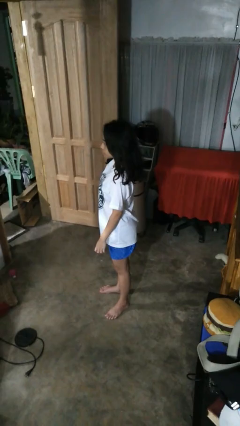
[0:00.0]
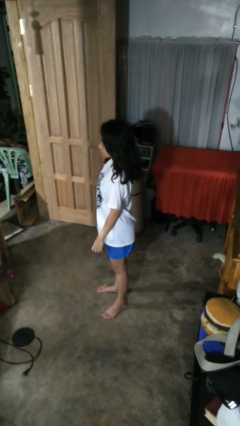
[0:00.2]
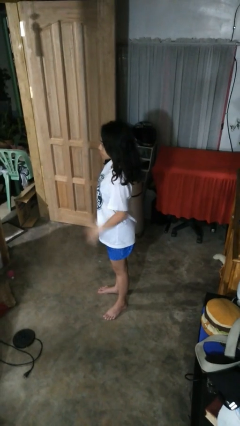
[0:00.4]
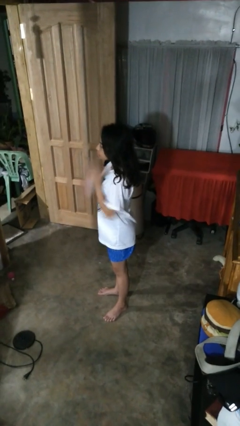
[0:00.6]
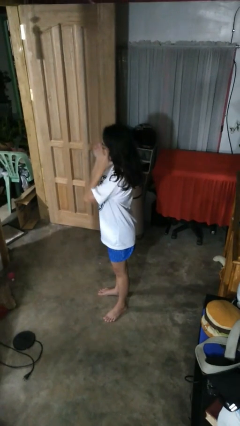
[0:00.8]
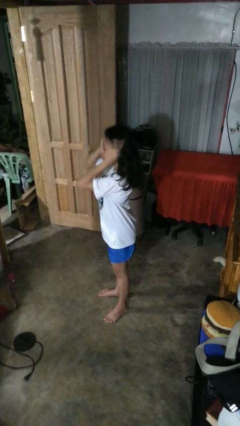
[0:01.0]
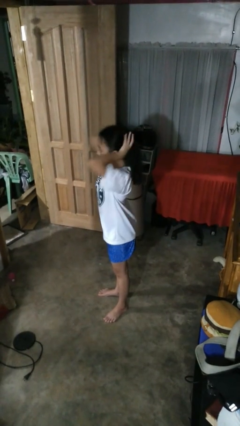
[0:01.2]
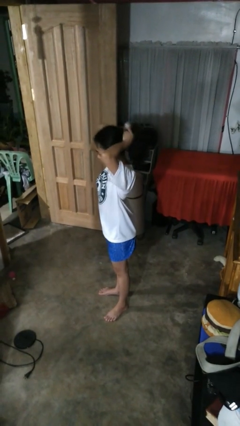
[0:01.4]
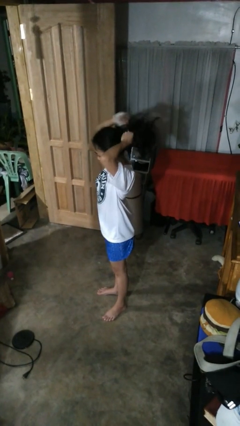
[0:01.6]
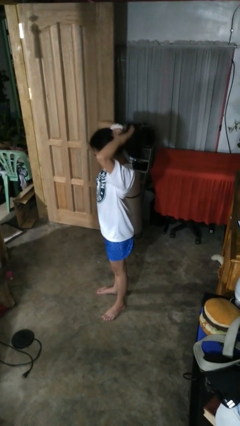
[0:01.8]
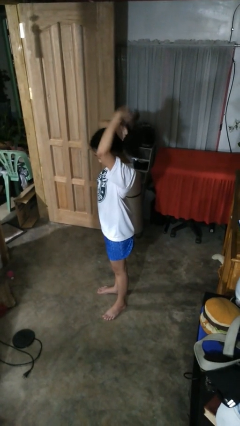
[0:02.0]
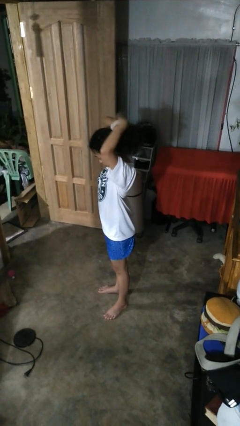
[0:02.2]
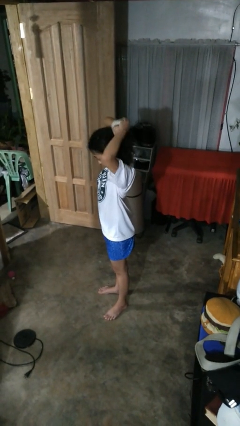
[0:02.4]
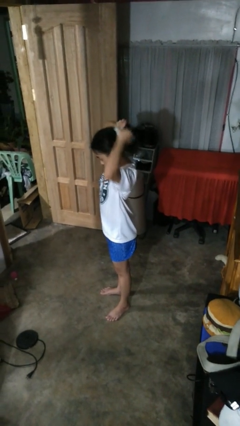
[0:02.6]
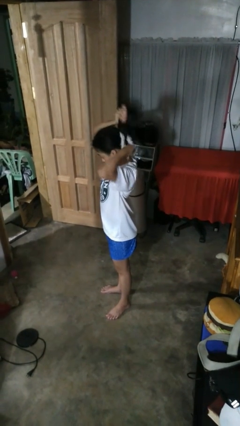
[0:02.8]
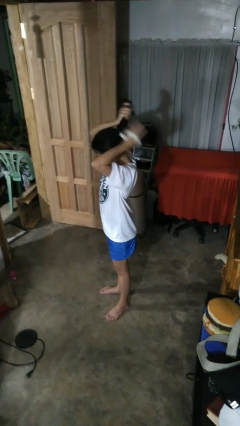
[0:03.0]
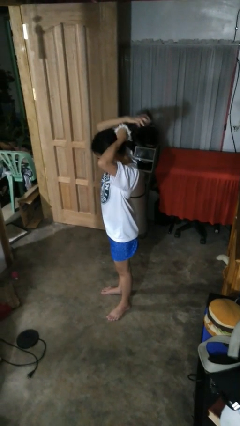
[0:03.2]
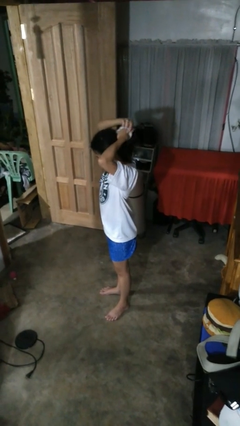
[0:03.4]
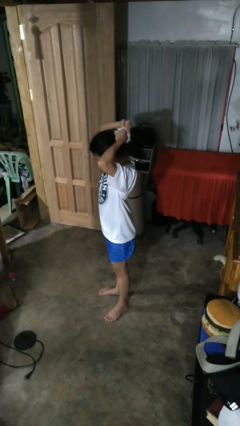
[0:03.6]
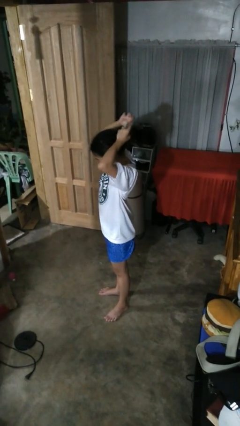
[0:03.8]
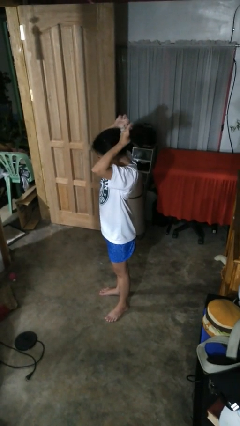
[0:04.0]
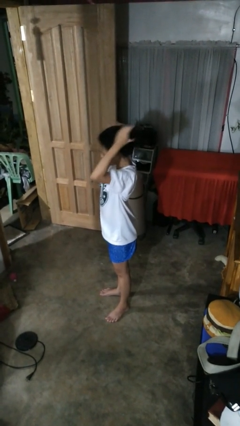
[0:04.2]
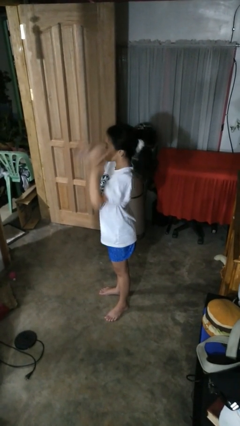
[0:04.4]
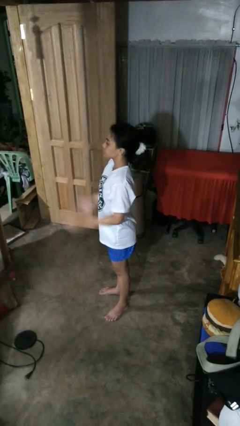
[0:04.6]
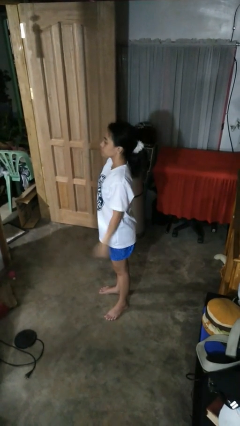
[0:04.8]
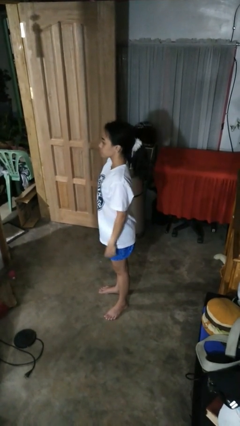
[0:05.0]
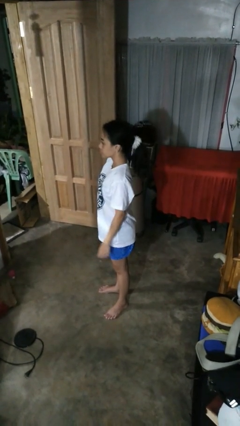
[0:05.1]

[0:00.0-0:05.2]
person puts hair in ponytail

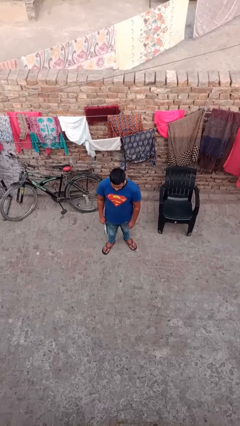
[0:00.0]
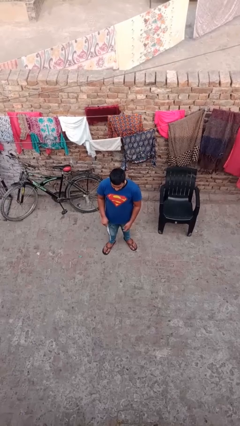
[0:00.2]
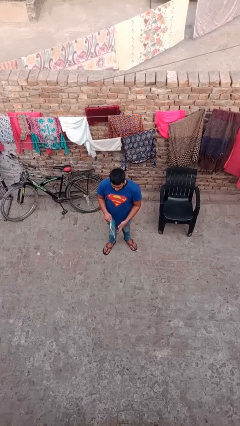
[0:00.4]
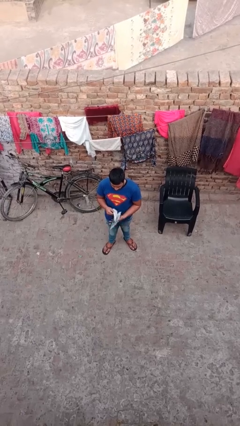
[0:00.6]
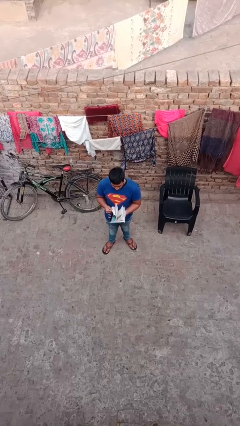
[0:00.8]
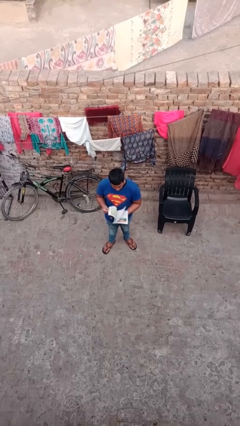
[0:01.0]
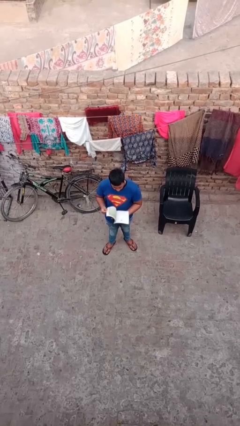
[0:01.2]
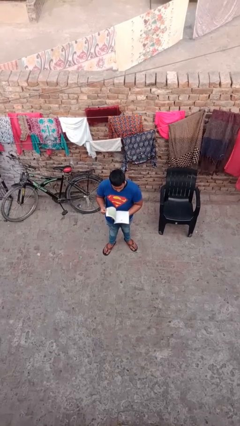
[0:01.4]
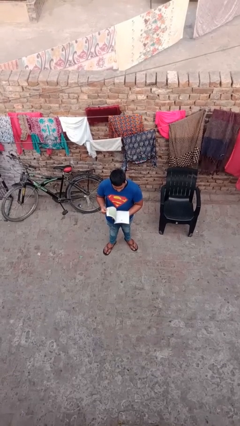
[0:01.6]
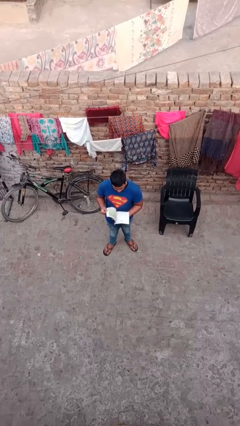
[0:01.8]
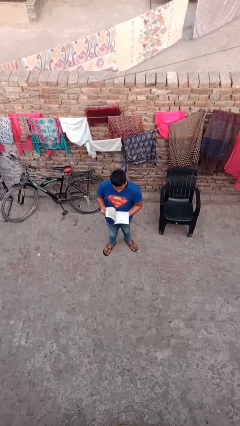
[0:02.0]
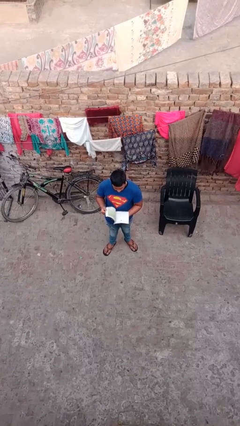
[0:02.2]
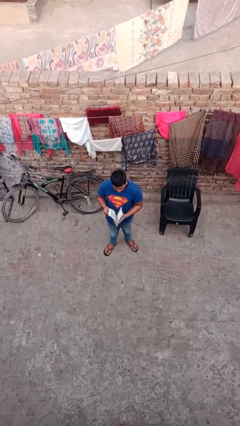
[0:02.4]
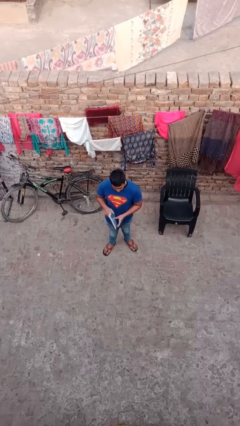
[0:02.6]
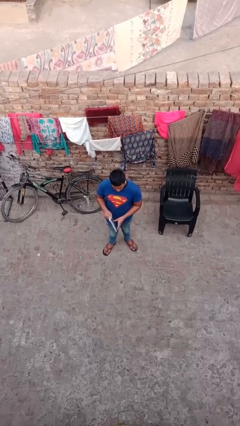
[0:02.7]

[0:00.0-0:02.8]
person reads document

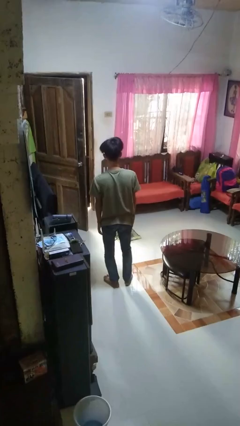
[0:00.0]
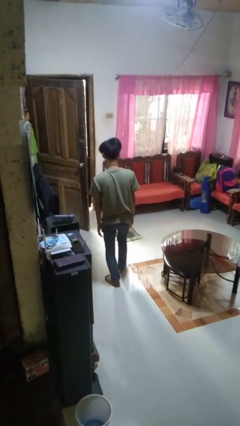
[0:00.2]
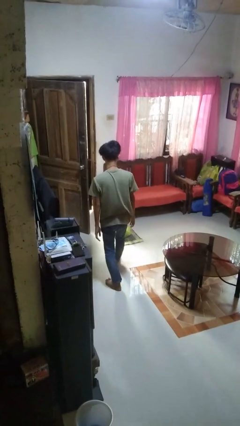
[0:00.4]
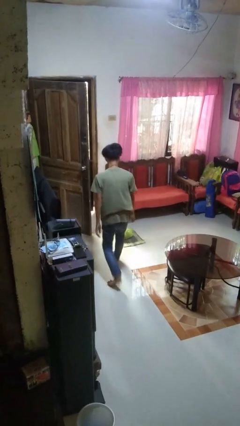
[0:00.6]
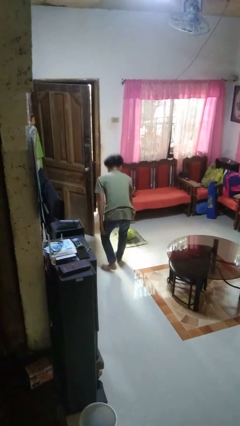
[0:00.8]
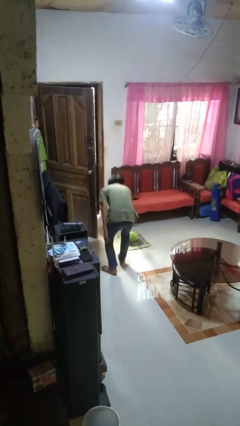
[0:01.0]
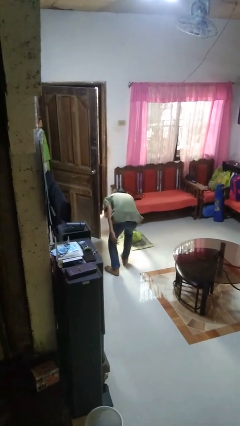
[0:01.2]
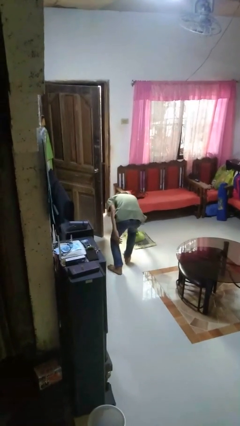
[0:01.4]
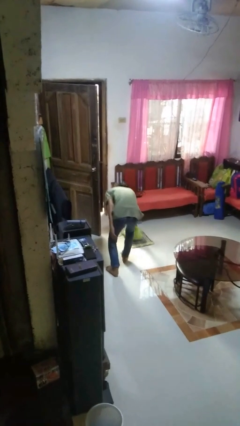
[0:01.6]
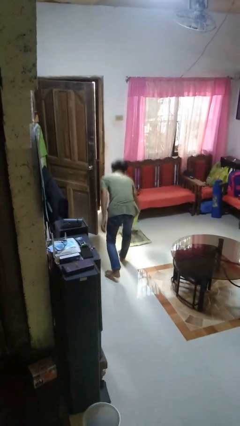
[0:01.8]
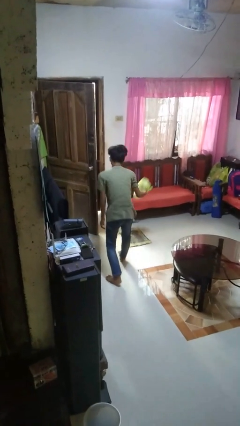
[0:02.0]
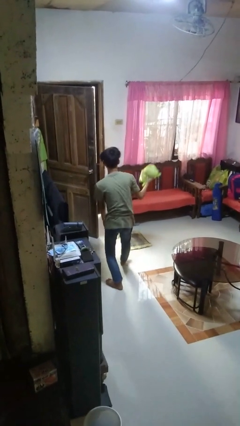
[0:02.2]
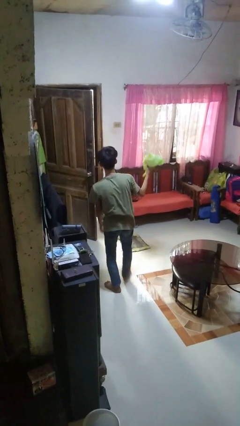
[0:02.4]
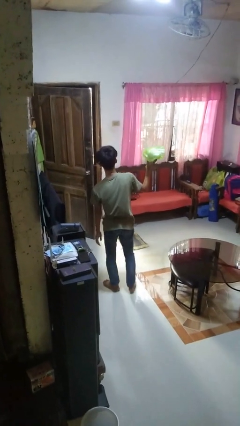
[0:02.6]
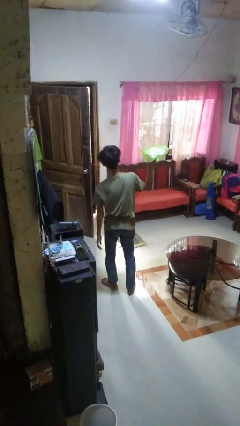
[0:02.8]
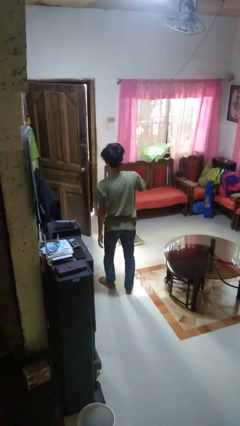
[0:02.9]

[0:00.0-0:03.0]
person picks up object from floor

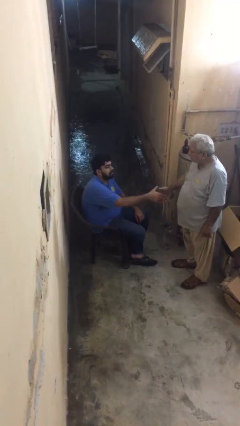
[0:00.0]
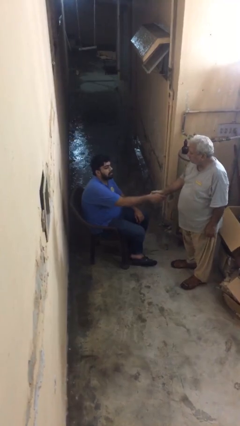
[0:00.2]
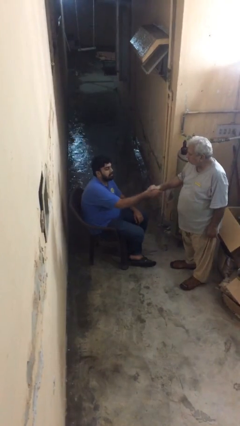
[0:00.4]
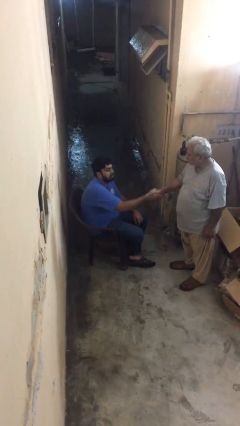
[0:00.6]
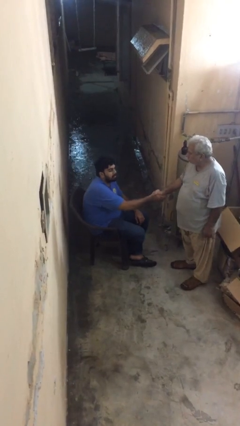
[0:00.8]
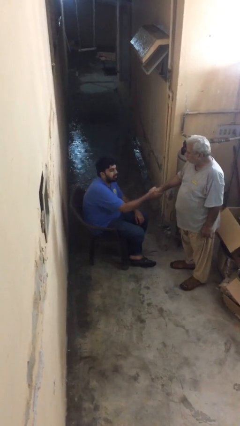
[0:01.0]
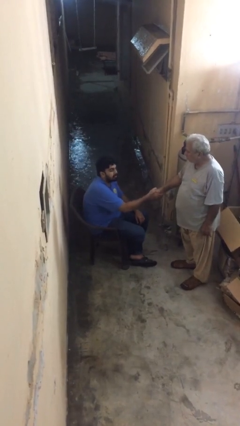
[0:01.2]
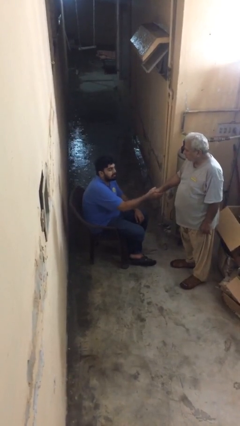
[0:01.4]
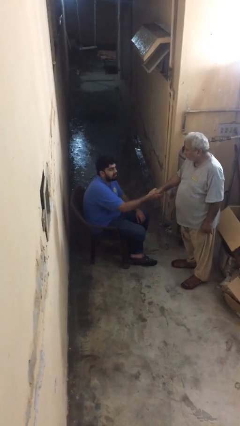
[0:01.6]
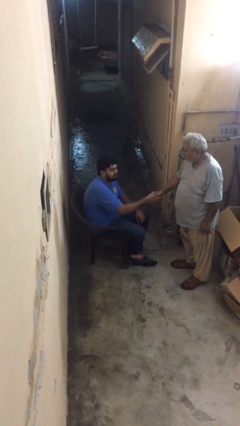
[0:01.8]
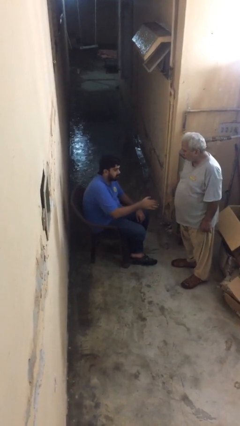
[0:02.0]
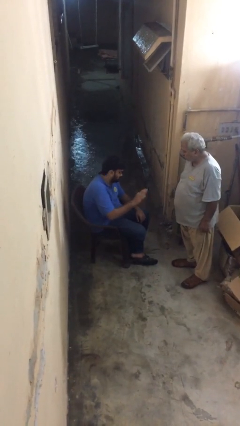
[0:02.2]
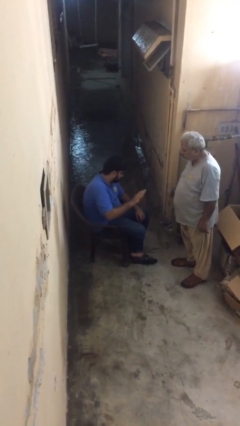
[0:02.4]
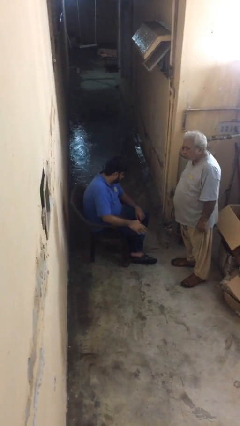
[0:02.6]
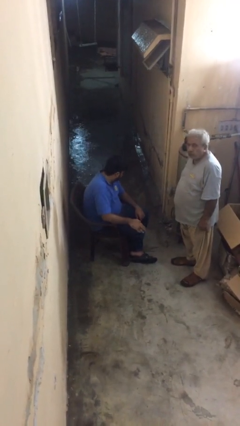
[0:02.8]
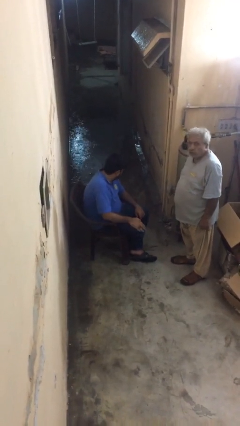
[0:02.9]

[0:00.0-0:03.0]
person shakes hand

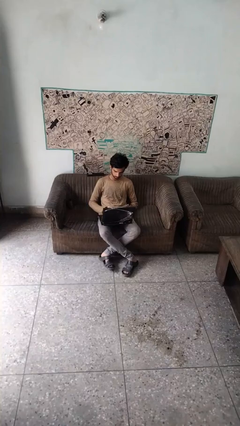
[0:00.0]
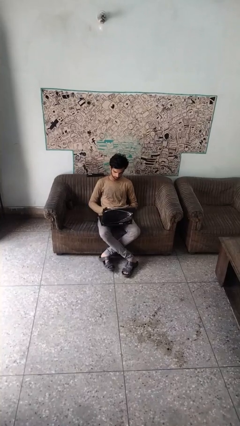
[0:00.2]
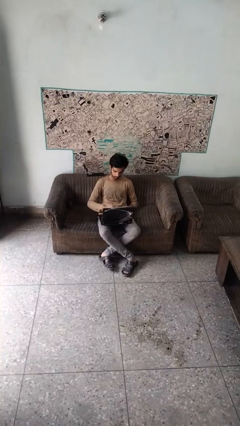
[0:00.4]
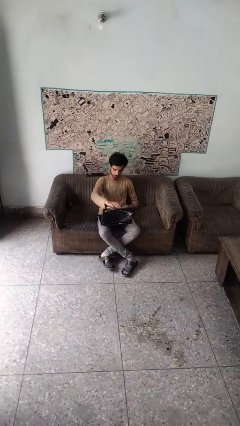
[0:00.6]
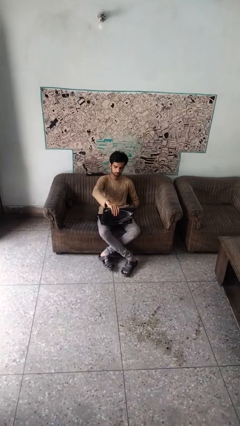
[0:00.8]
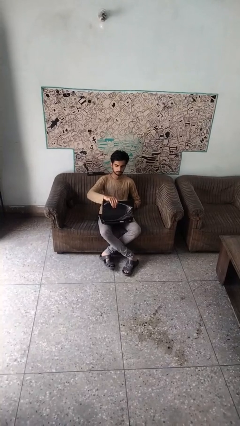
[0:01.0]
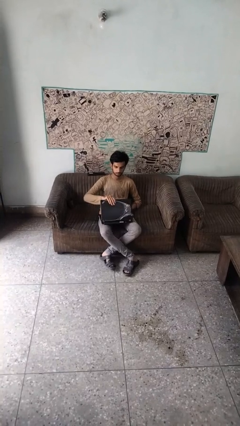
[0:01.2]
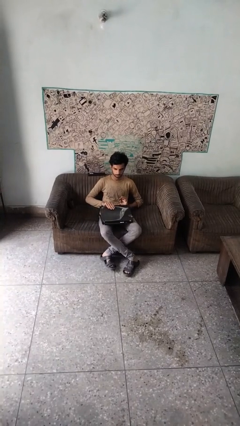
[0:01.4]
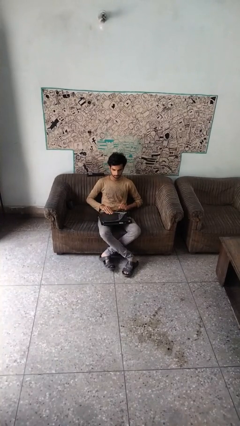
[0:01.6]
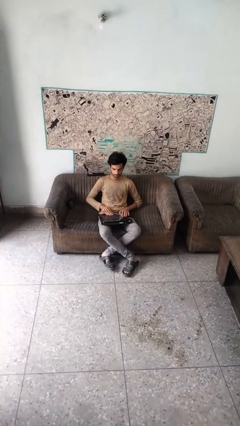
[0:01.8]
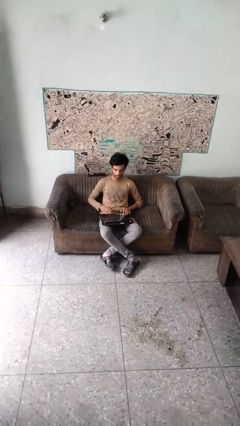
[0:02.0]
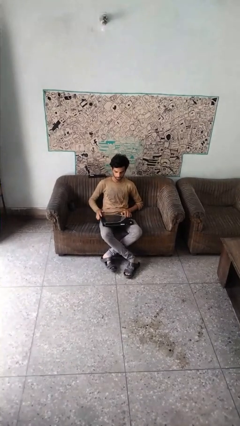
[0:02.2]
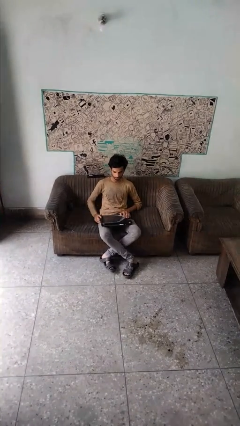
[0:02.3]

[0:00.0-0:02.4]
person closes laptop

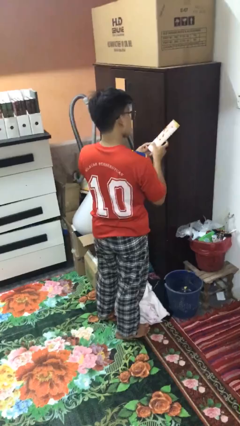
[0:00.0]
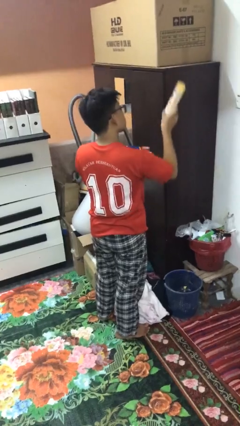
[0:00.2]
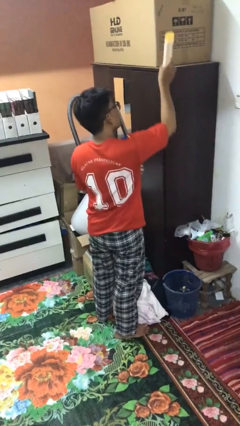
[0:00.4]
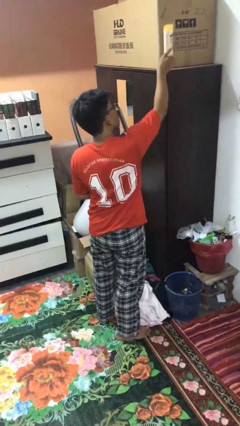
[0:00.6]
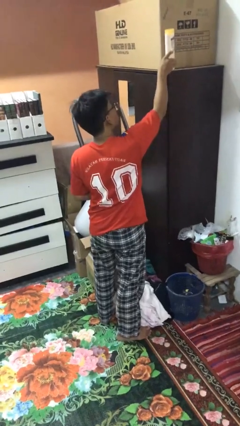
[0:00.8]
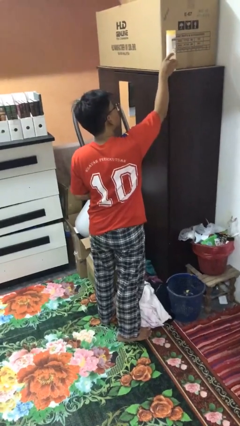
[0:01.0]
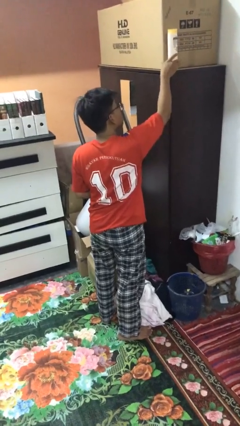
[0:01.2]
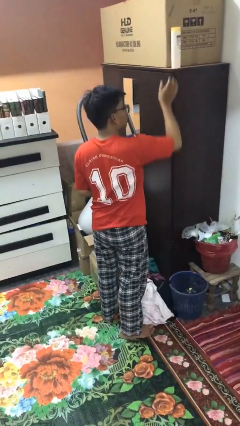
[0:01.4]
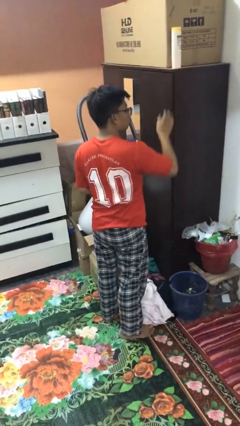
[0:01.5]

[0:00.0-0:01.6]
person puts down object on shelf
